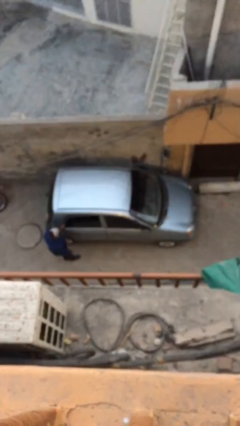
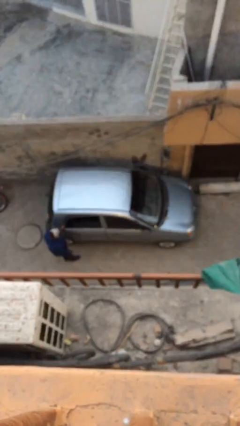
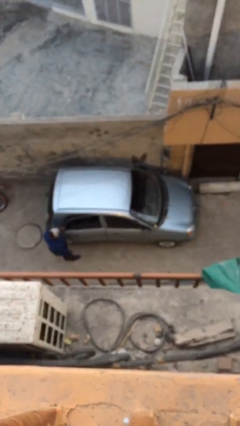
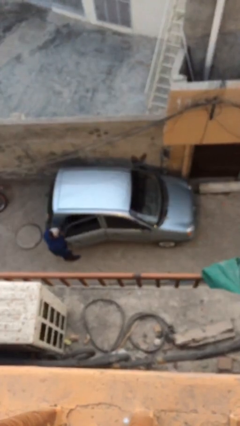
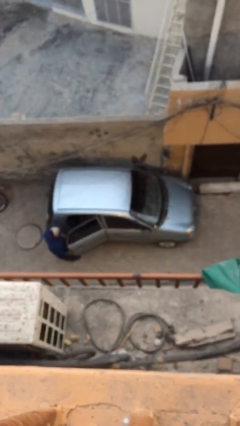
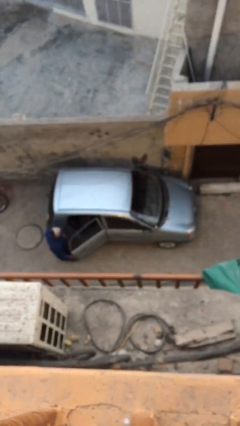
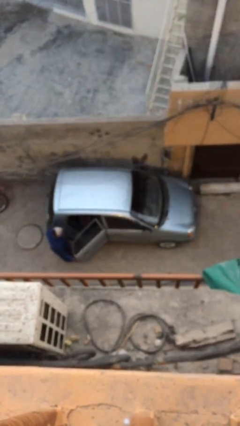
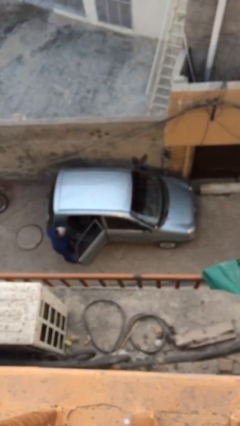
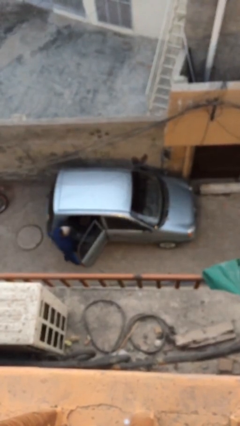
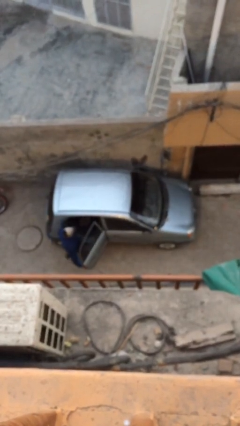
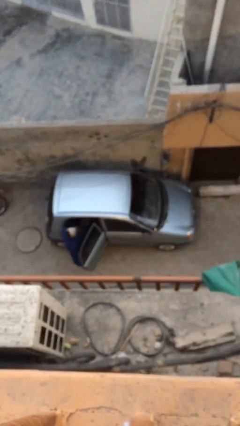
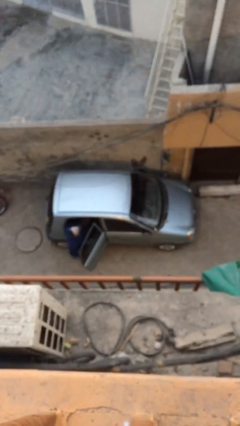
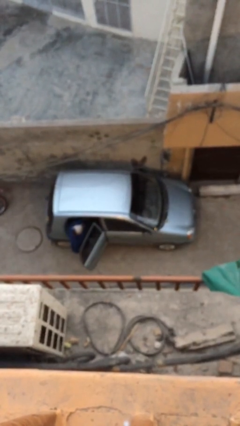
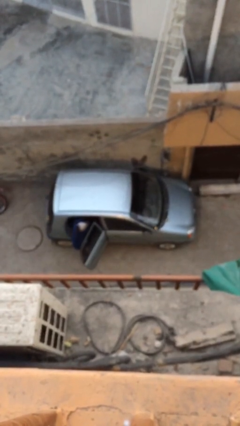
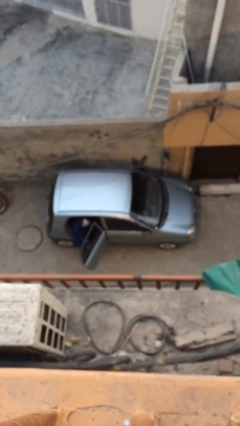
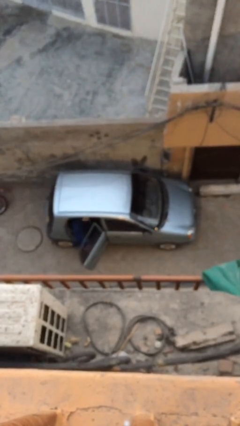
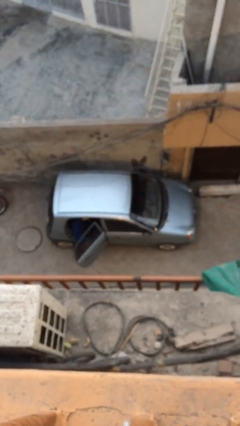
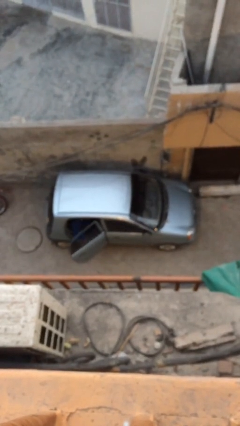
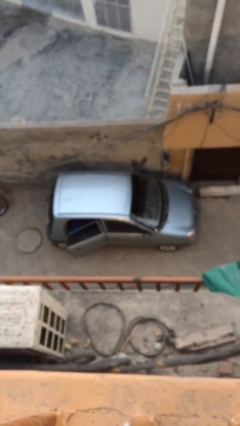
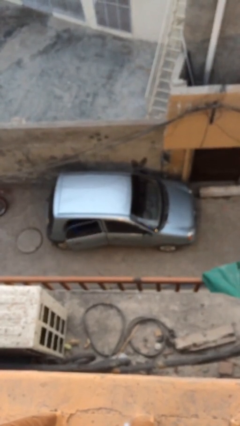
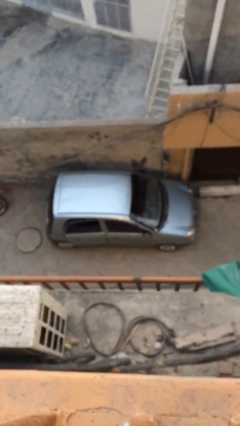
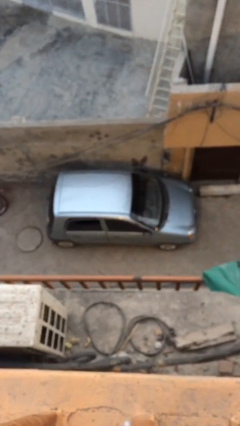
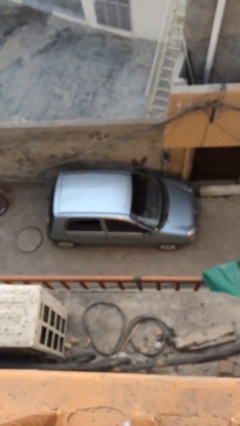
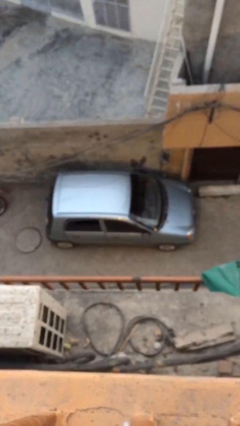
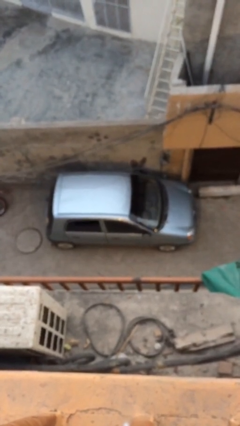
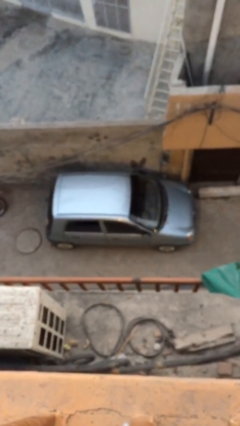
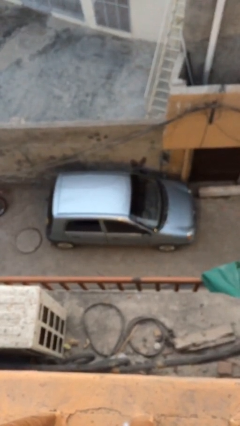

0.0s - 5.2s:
car picks up person

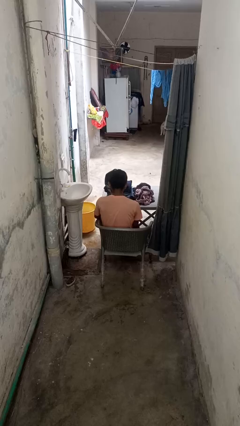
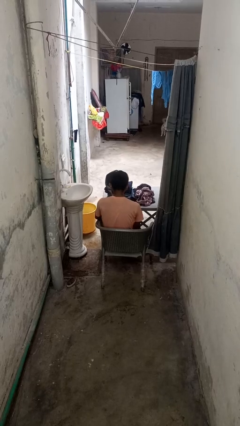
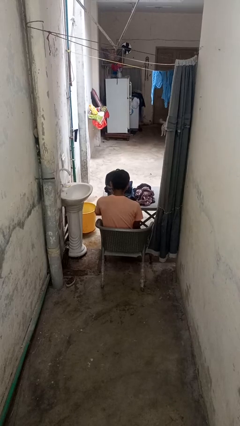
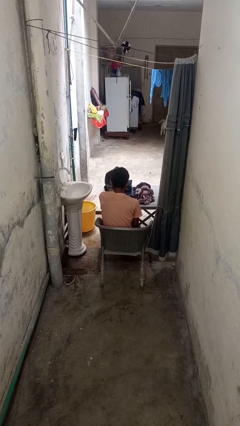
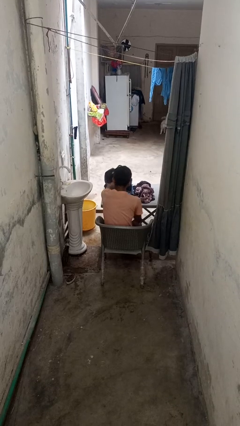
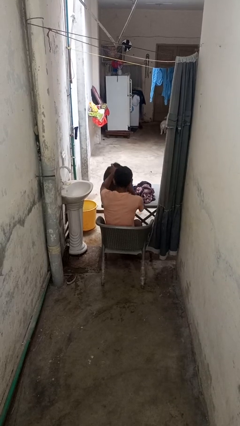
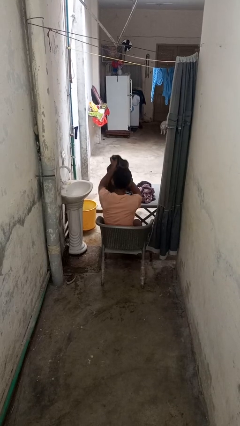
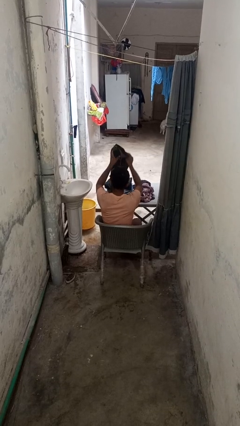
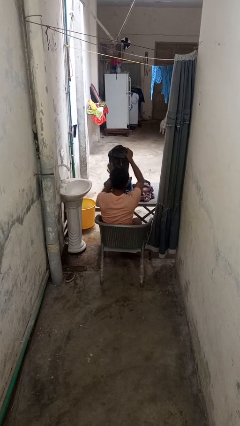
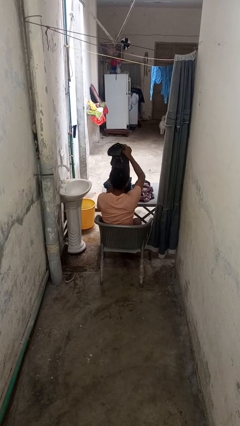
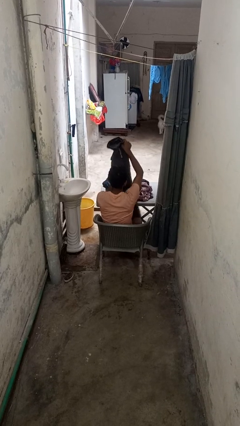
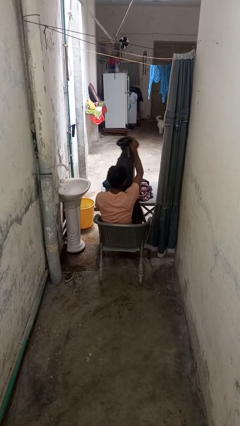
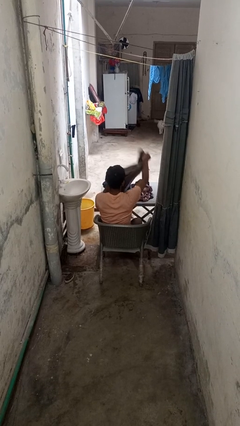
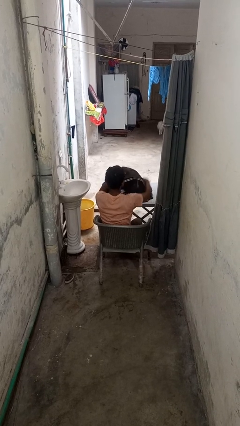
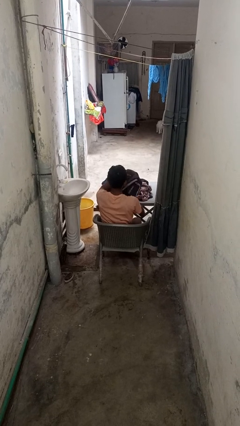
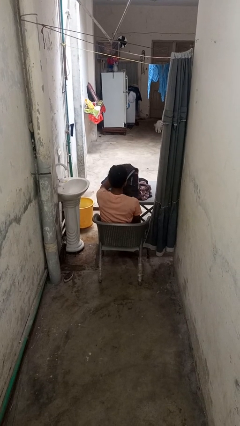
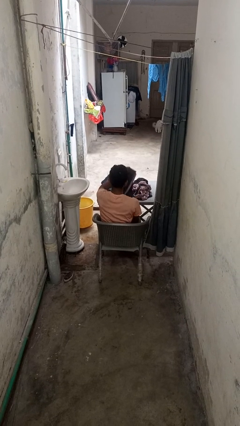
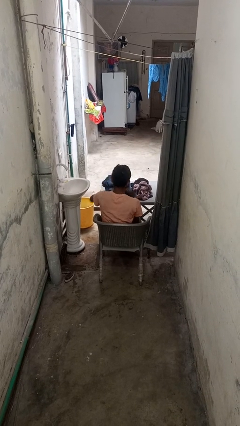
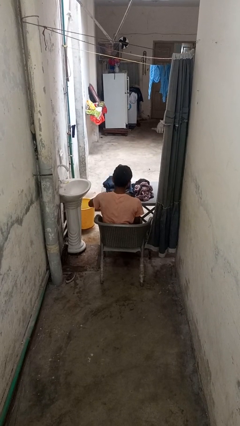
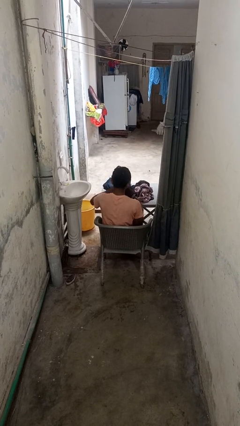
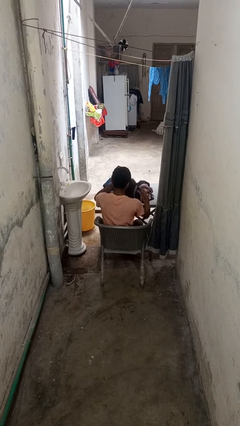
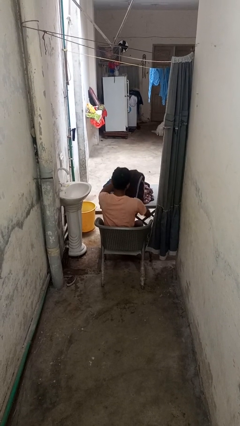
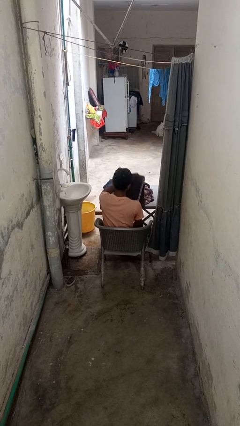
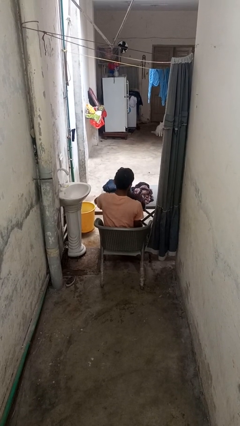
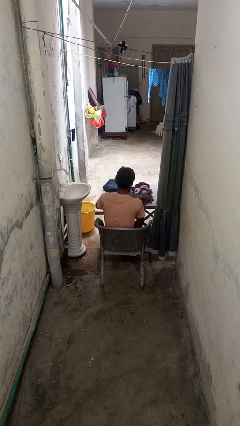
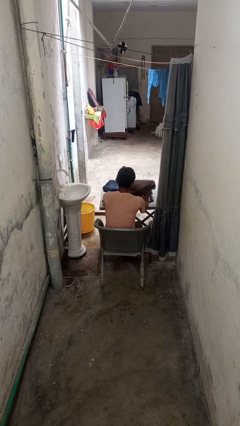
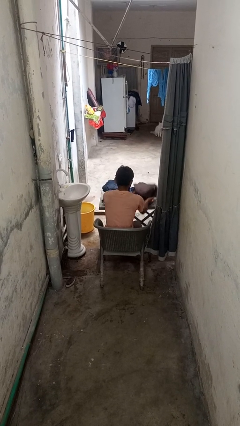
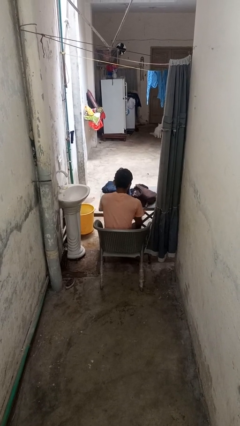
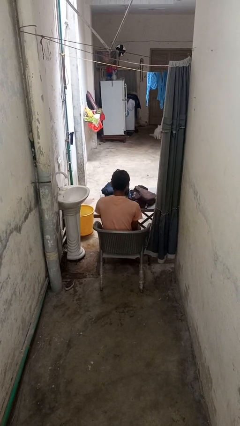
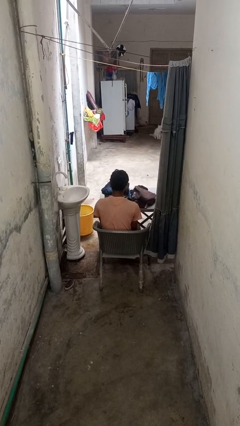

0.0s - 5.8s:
person folds pants

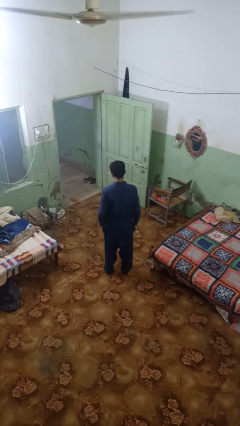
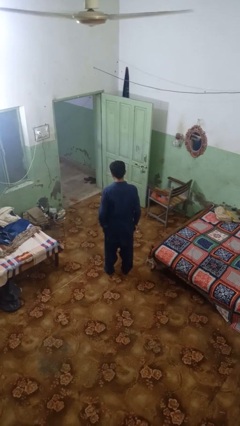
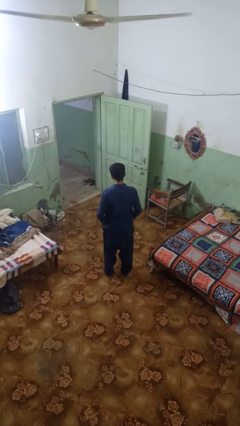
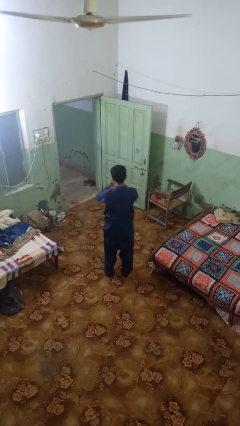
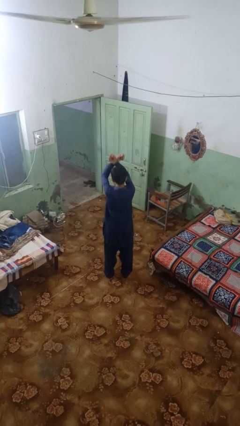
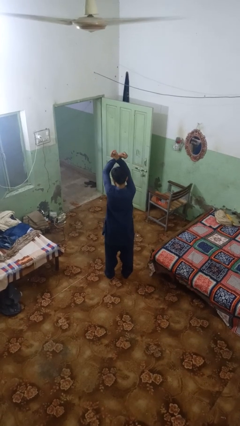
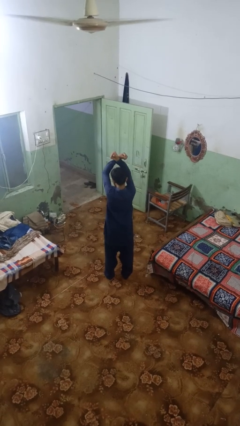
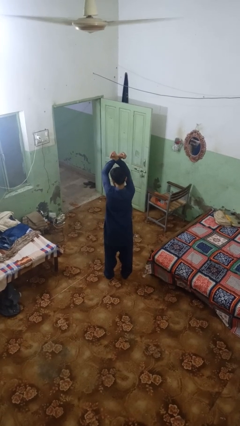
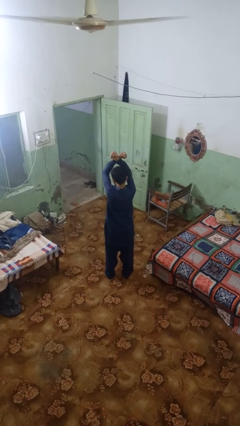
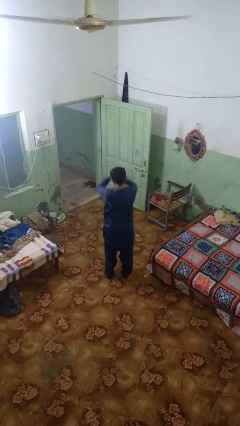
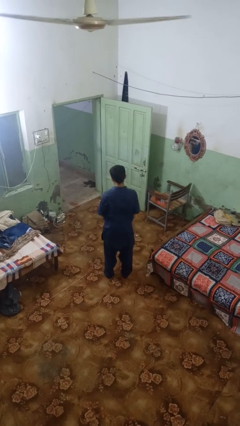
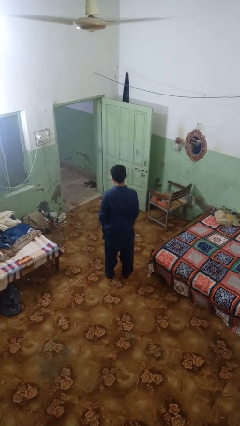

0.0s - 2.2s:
person crosses arms

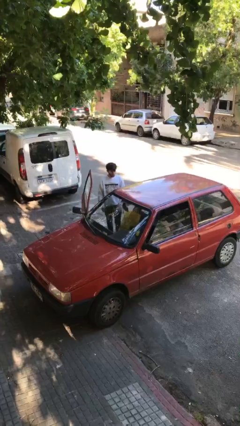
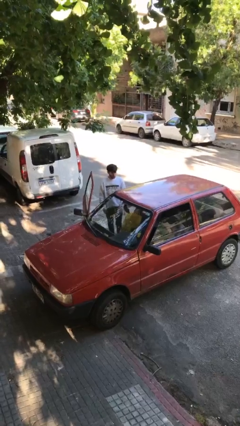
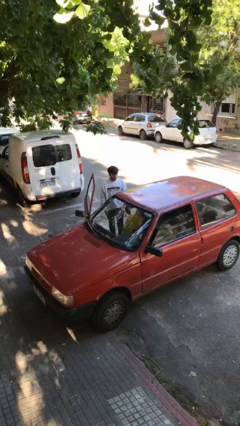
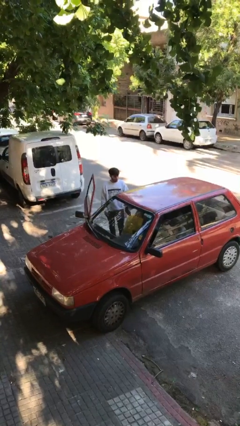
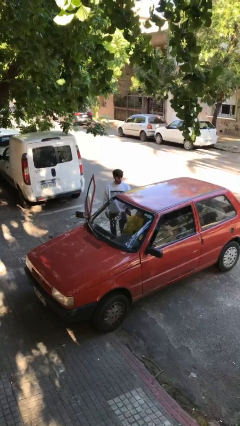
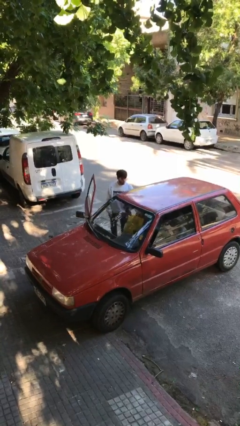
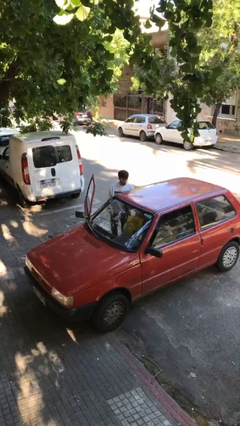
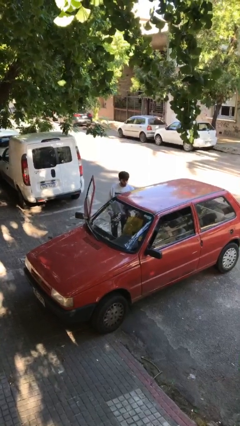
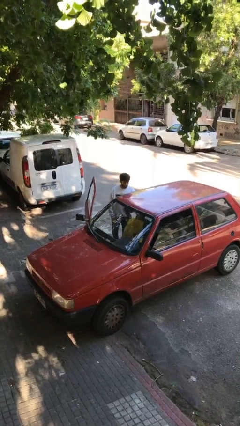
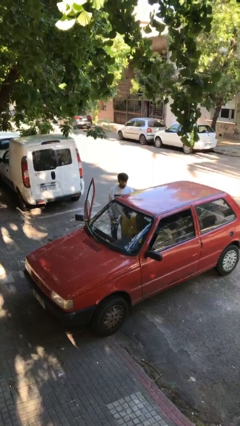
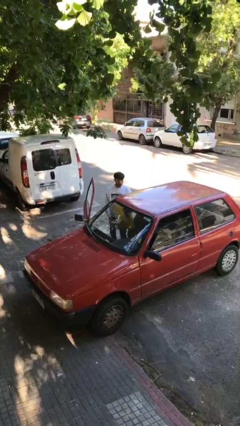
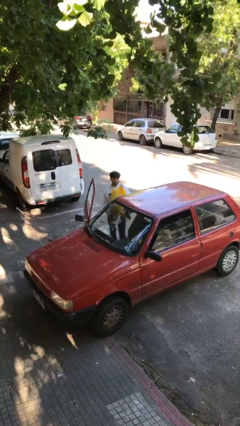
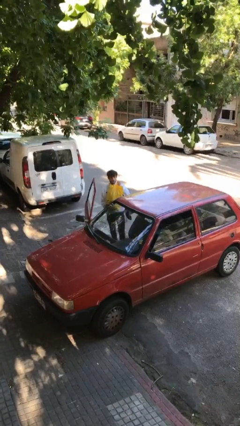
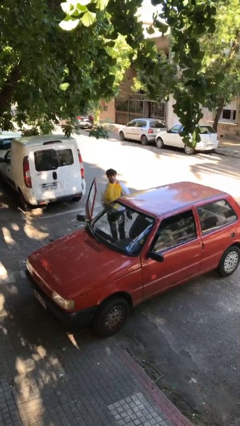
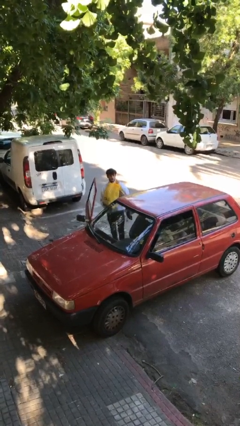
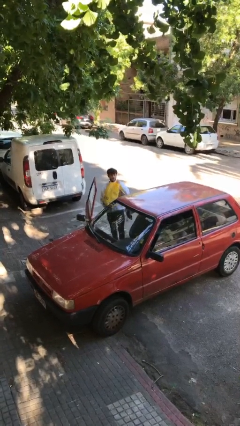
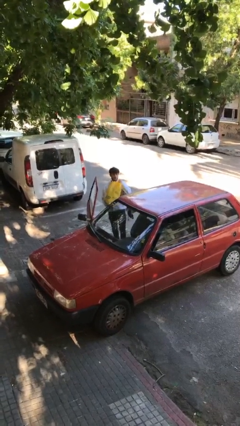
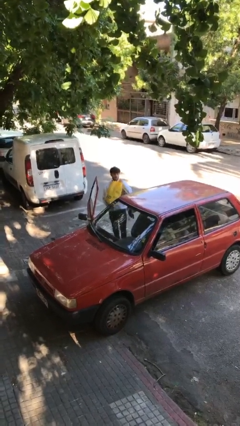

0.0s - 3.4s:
person unloads car

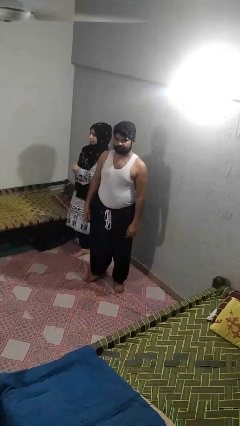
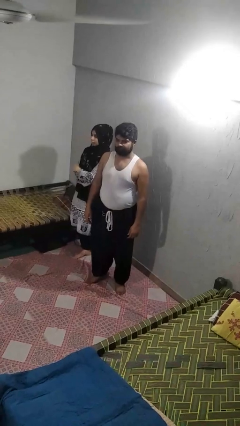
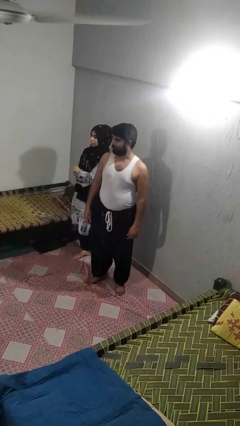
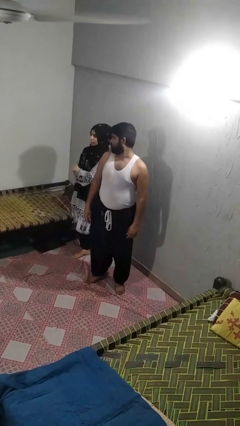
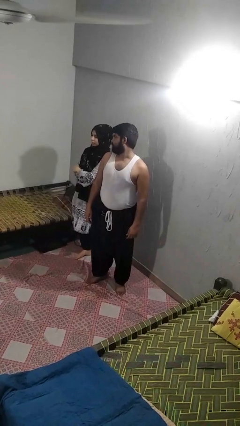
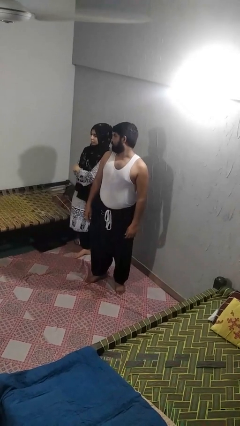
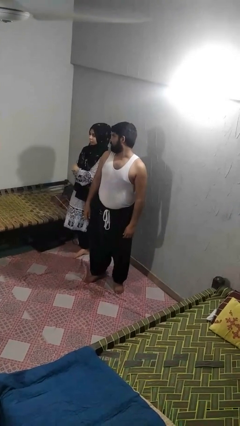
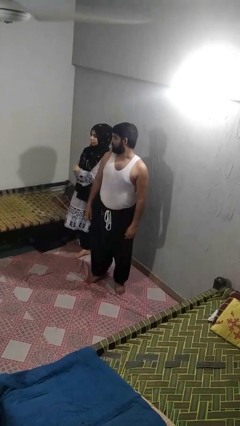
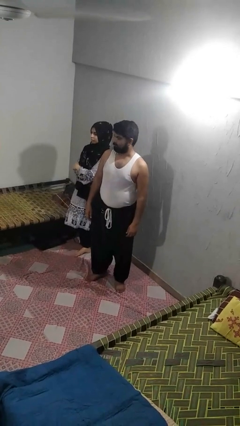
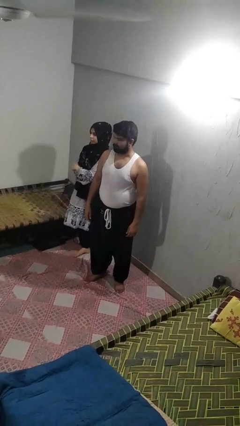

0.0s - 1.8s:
person looks over shoulder
